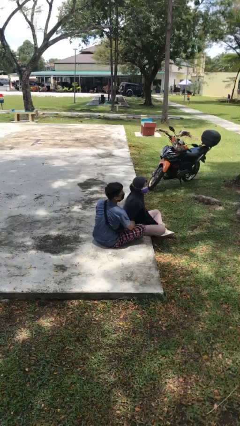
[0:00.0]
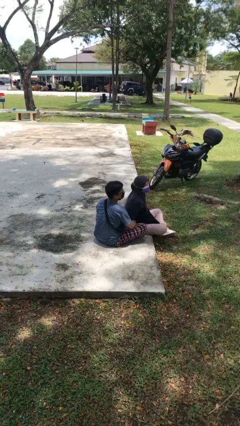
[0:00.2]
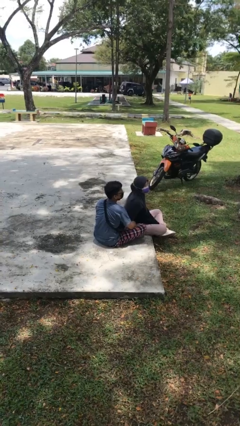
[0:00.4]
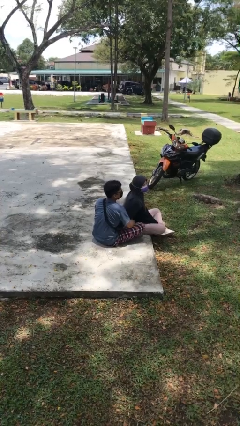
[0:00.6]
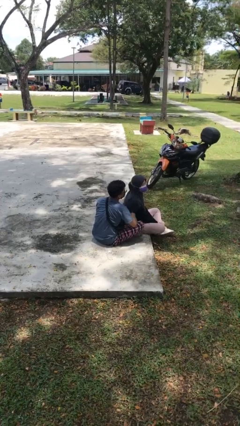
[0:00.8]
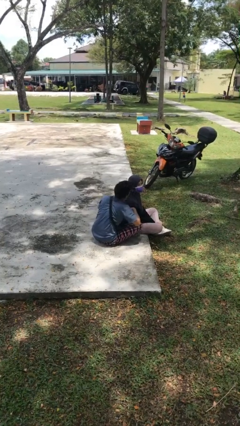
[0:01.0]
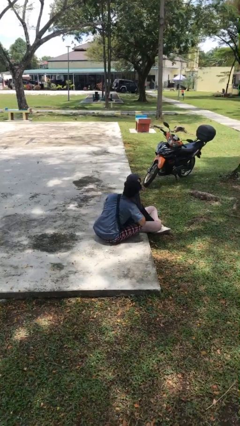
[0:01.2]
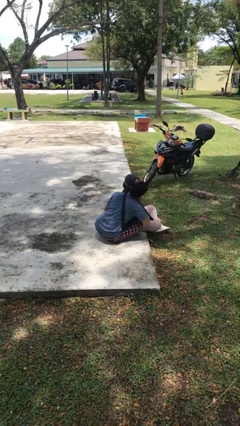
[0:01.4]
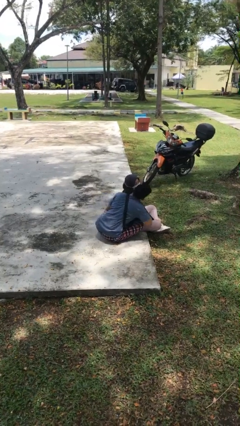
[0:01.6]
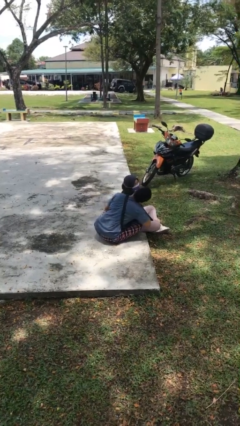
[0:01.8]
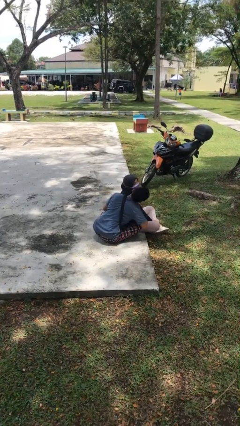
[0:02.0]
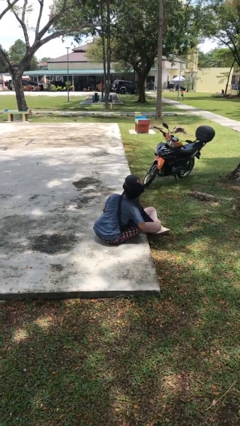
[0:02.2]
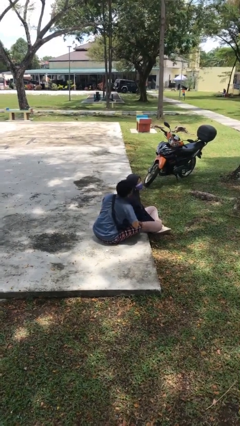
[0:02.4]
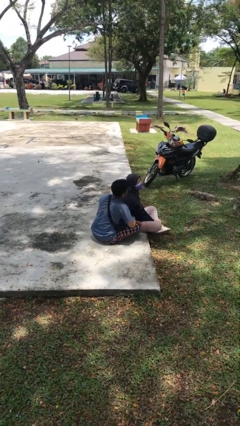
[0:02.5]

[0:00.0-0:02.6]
person kisses cheek of person

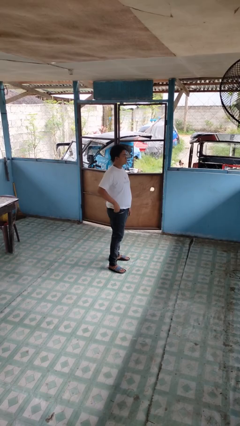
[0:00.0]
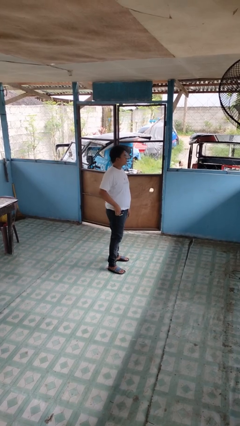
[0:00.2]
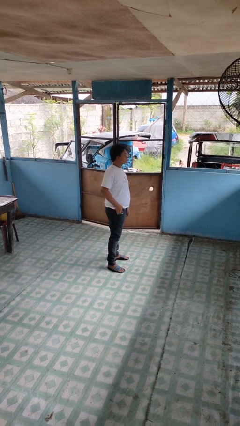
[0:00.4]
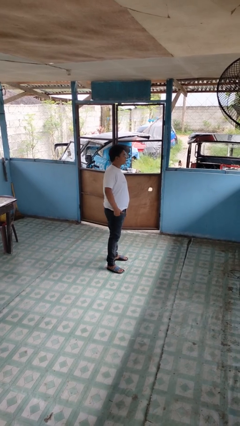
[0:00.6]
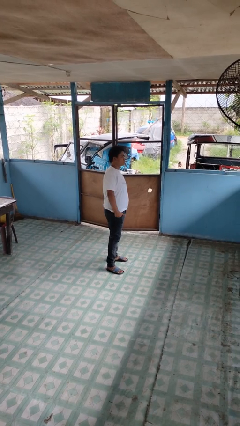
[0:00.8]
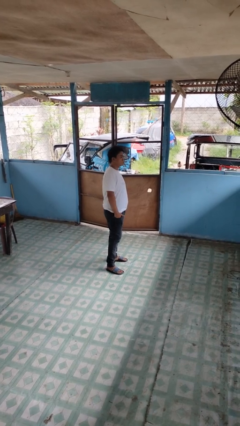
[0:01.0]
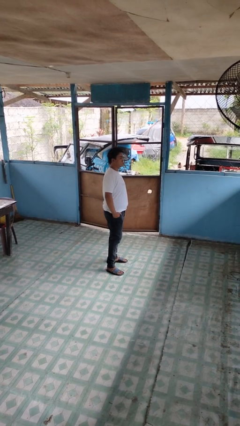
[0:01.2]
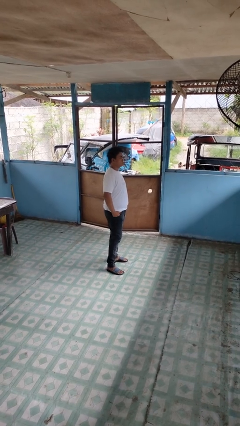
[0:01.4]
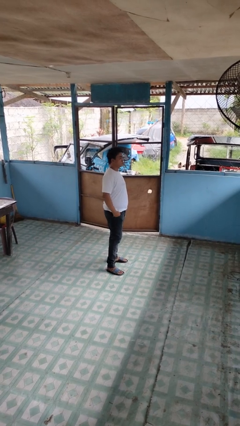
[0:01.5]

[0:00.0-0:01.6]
person puts hands in back pockets

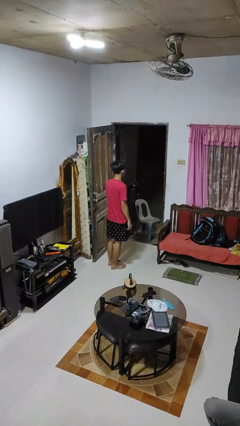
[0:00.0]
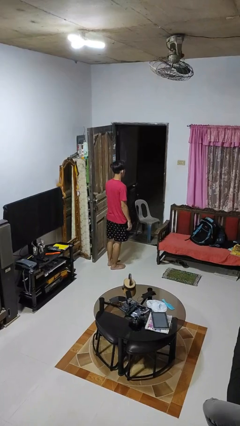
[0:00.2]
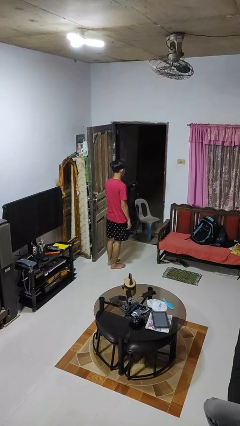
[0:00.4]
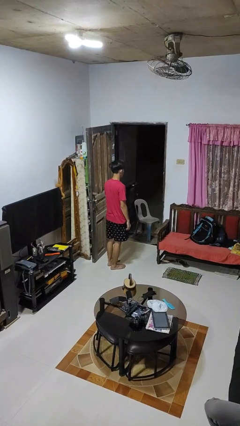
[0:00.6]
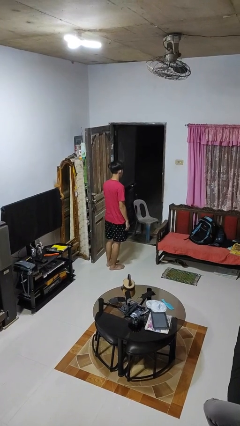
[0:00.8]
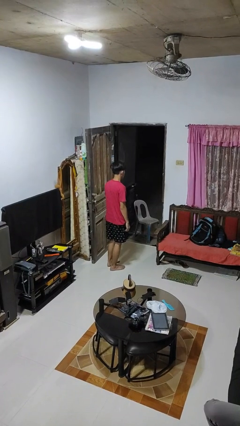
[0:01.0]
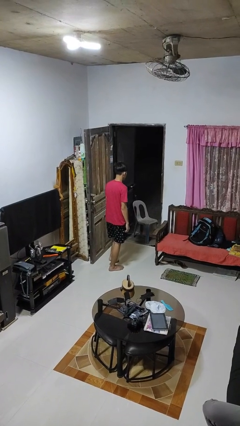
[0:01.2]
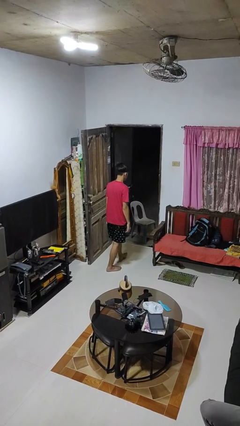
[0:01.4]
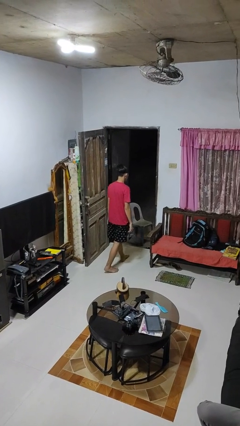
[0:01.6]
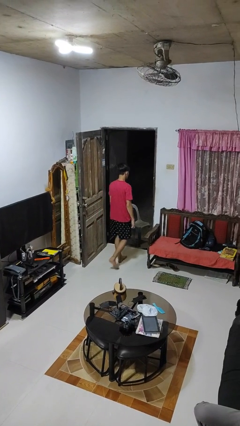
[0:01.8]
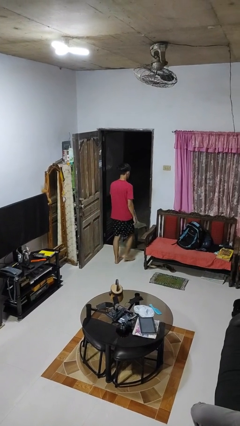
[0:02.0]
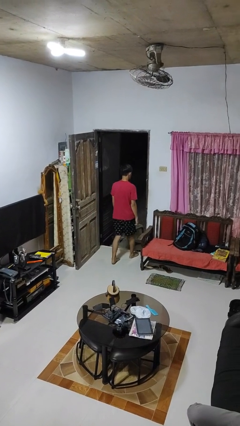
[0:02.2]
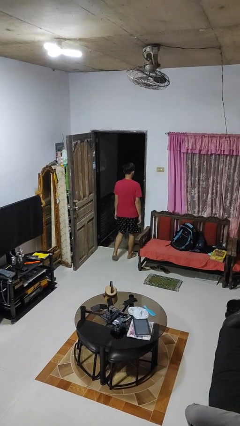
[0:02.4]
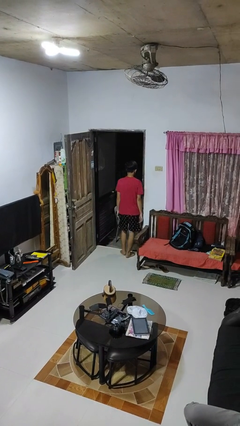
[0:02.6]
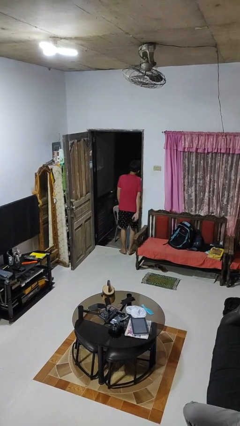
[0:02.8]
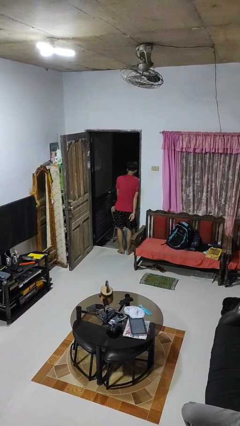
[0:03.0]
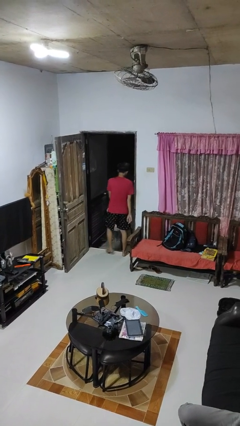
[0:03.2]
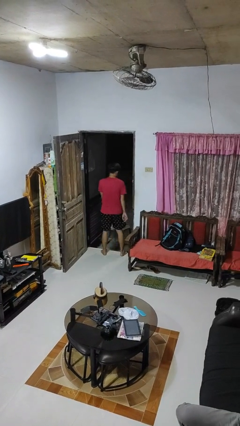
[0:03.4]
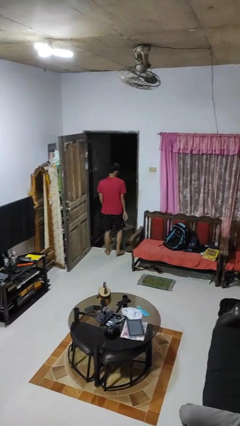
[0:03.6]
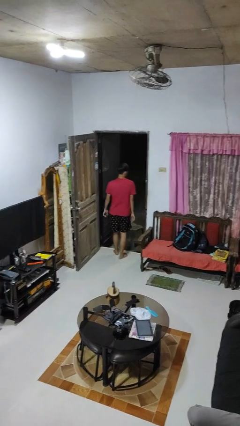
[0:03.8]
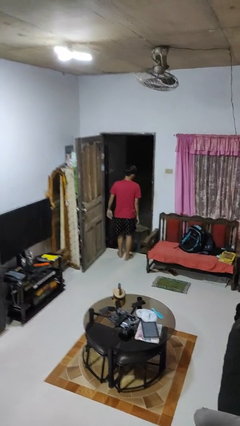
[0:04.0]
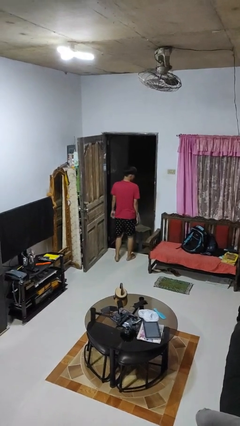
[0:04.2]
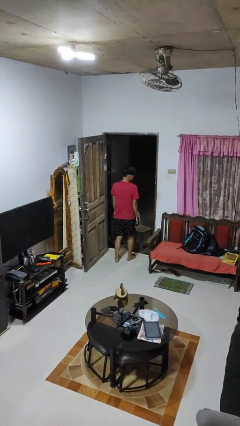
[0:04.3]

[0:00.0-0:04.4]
person bumps into wall

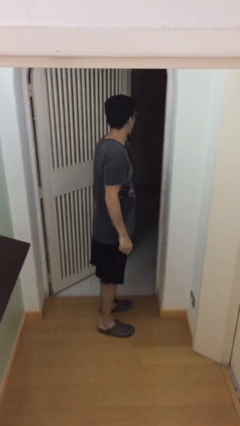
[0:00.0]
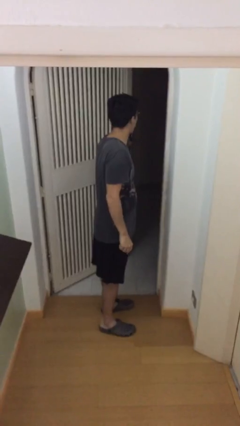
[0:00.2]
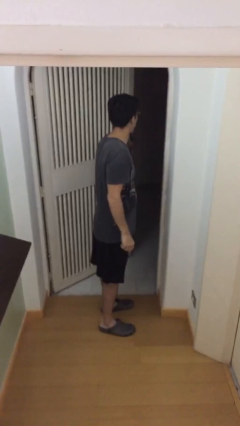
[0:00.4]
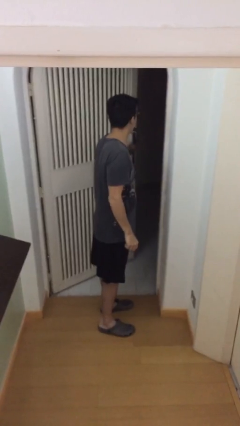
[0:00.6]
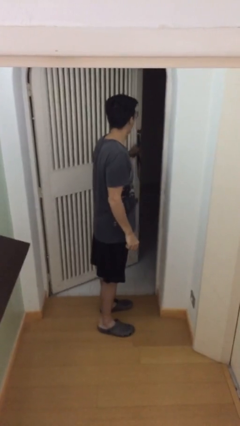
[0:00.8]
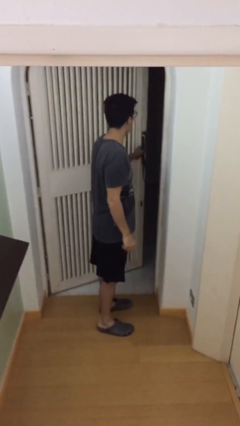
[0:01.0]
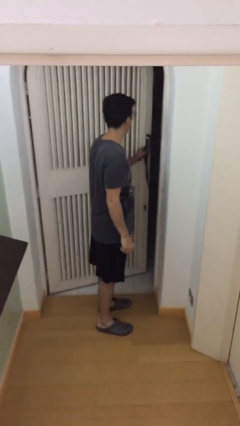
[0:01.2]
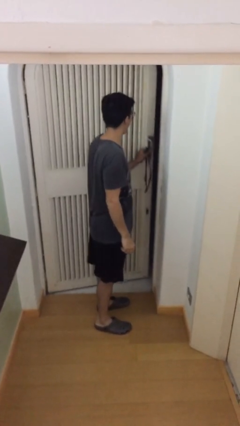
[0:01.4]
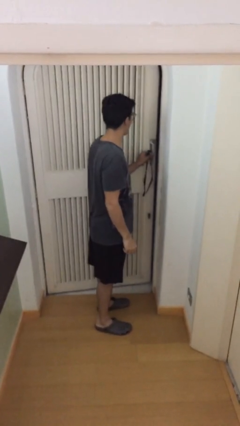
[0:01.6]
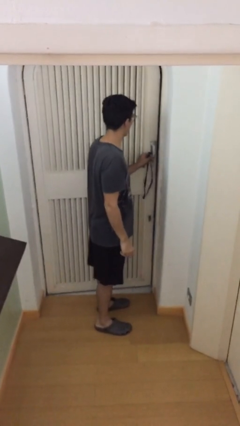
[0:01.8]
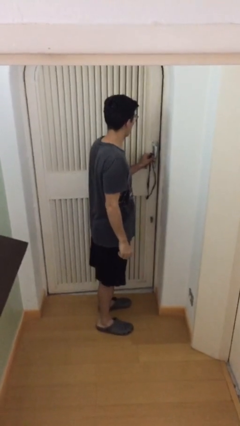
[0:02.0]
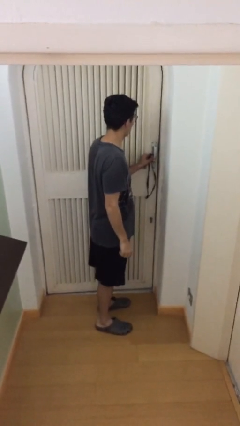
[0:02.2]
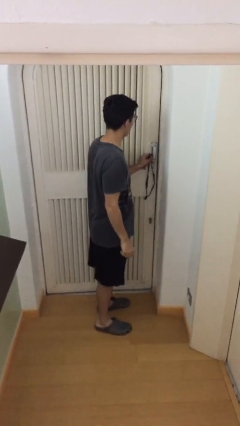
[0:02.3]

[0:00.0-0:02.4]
person closes facility door

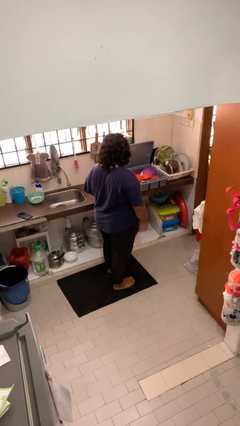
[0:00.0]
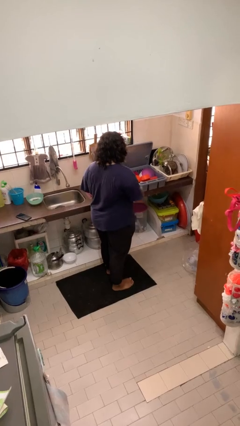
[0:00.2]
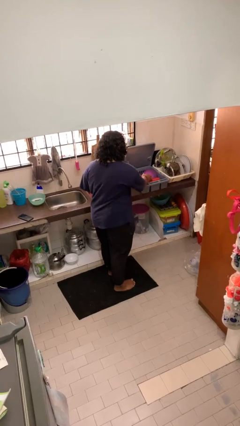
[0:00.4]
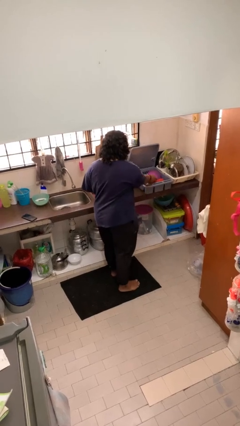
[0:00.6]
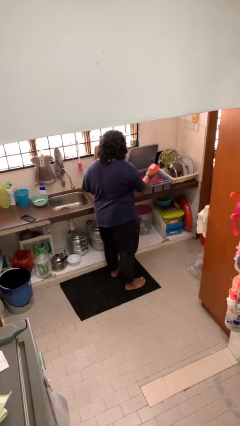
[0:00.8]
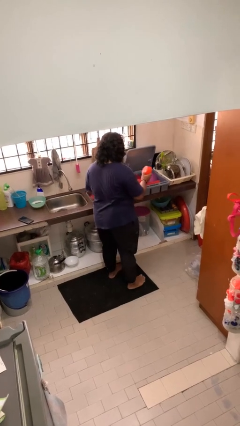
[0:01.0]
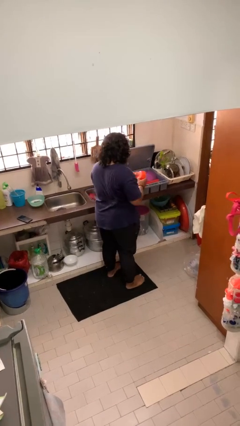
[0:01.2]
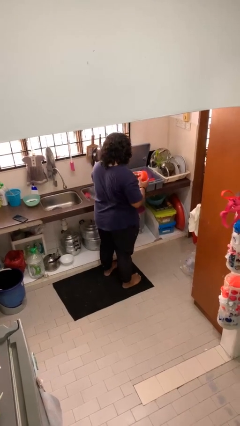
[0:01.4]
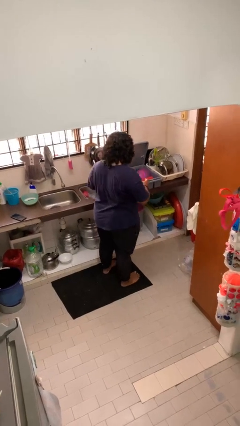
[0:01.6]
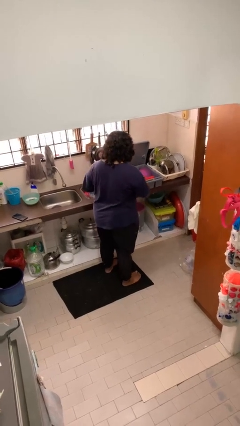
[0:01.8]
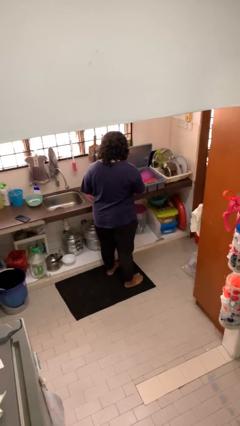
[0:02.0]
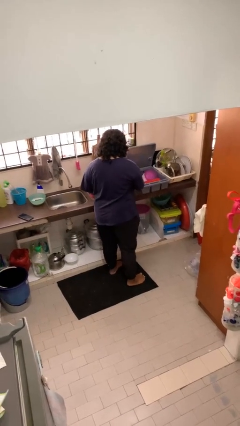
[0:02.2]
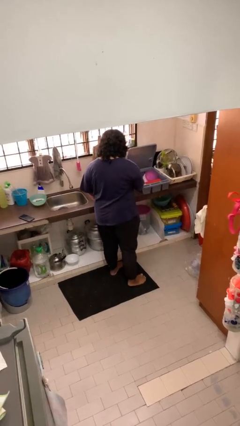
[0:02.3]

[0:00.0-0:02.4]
person unloads dishwasher

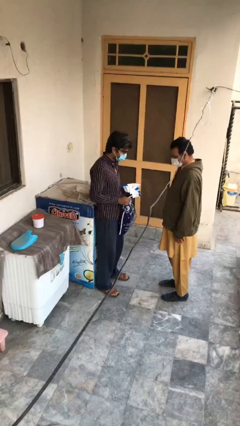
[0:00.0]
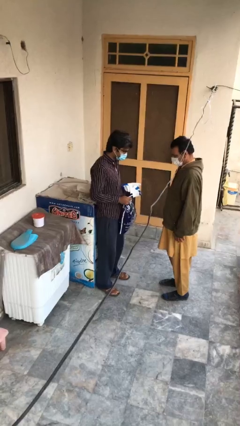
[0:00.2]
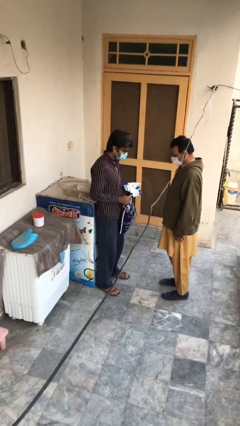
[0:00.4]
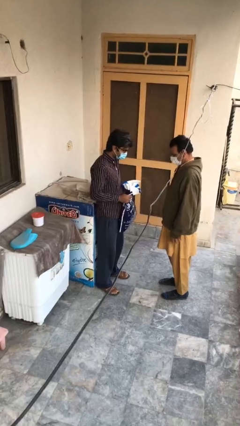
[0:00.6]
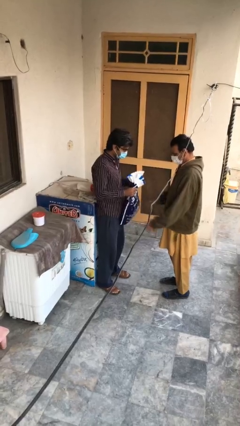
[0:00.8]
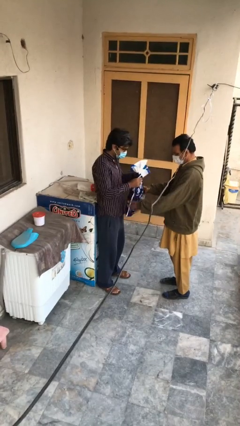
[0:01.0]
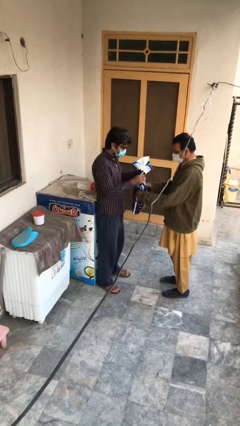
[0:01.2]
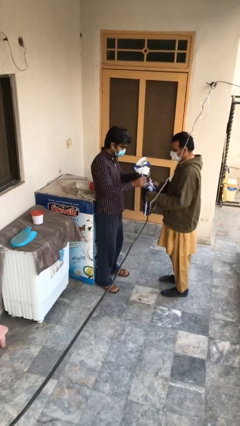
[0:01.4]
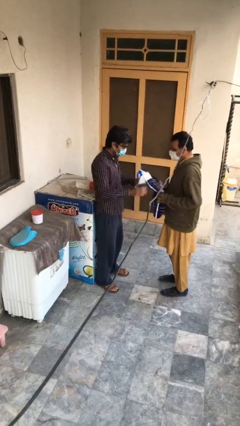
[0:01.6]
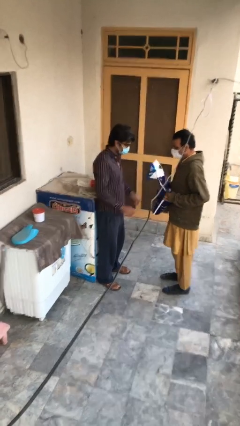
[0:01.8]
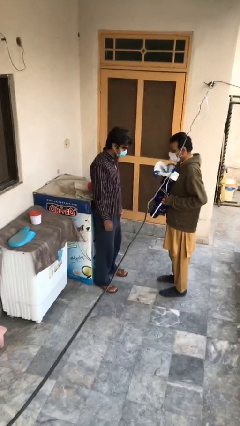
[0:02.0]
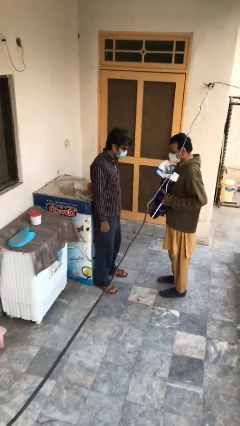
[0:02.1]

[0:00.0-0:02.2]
person transfers object to person

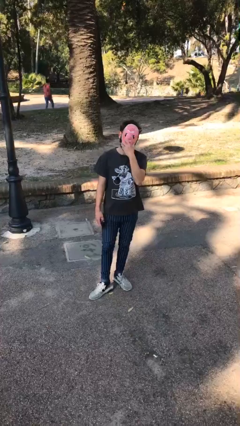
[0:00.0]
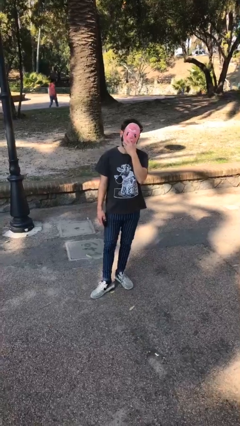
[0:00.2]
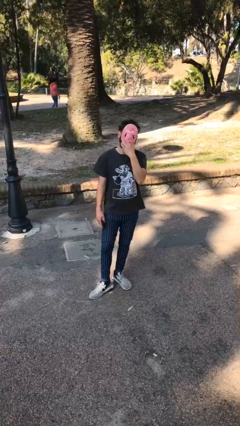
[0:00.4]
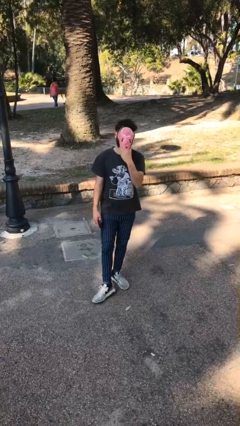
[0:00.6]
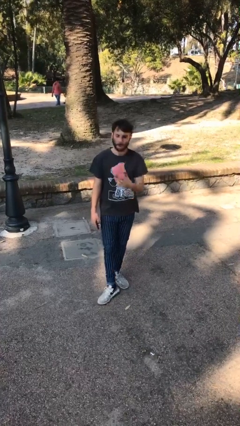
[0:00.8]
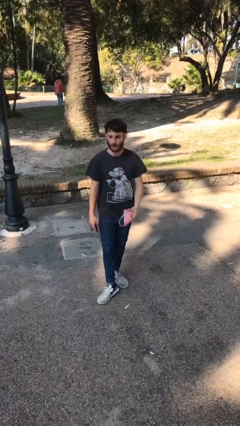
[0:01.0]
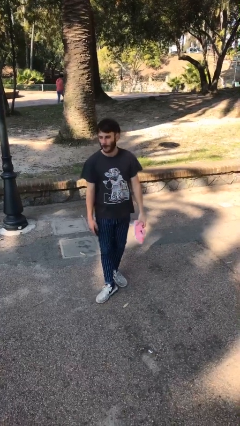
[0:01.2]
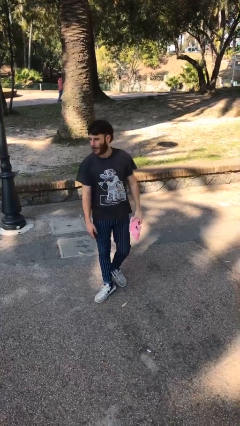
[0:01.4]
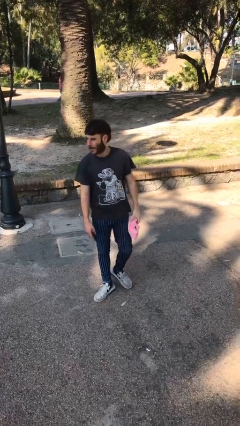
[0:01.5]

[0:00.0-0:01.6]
person takes off facemask
